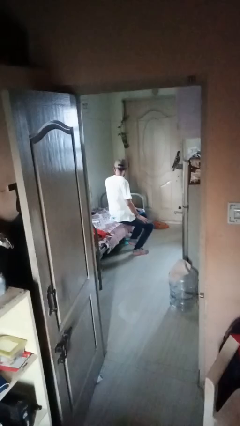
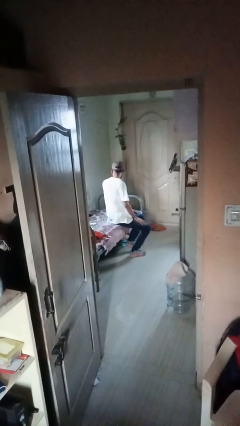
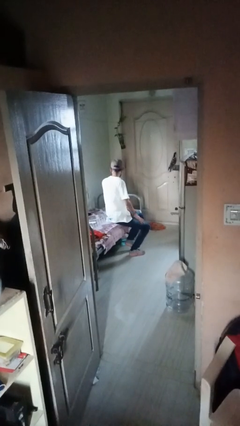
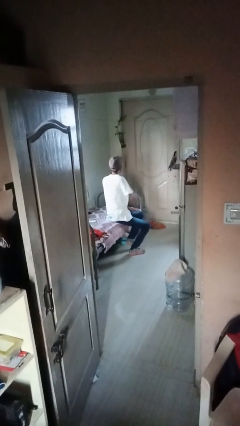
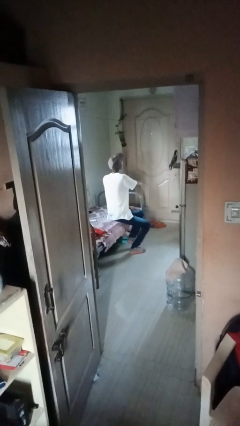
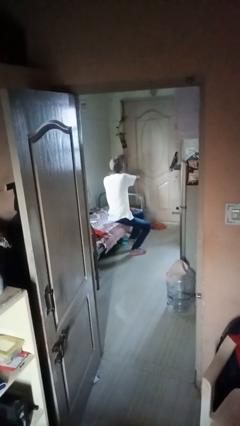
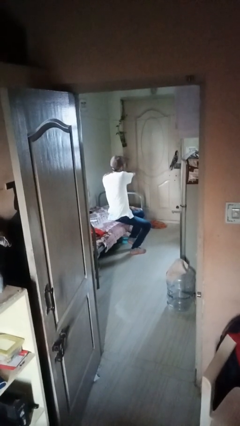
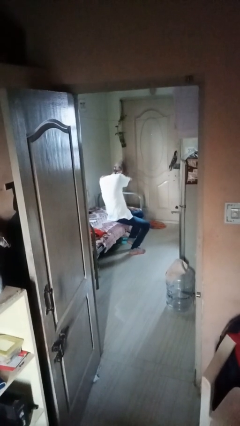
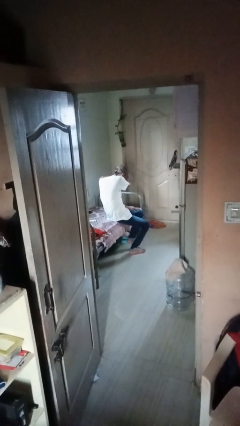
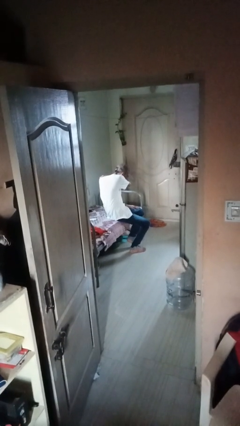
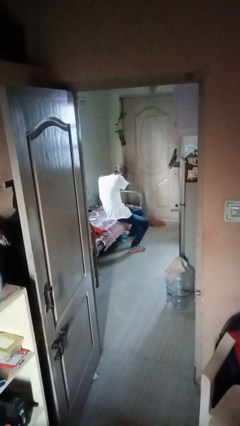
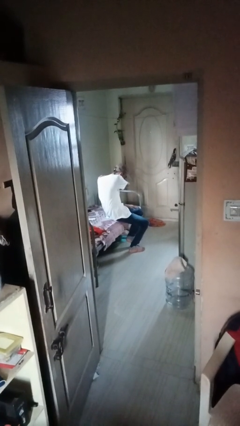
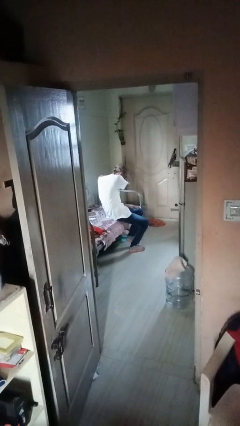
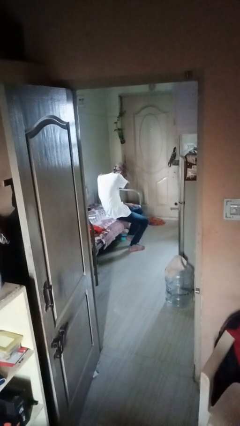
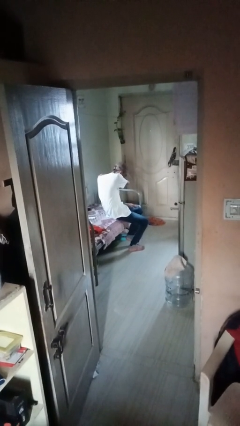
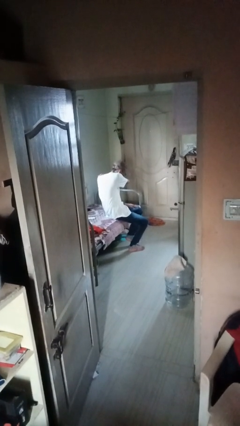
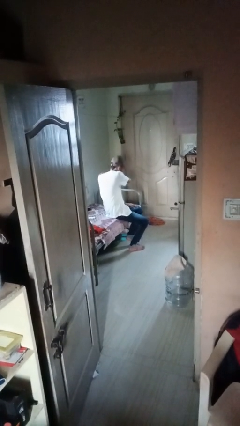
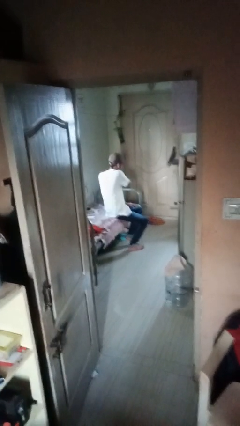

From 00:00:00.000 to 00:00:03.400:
person sneezes into arm

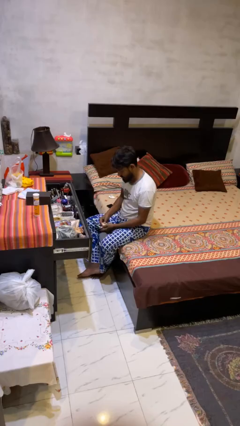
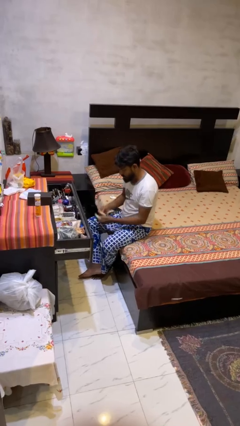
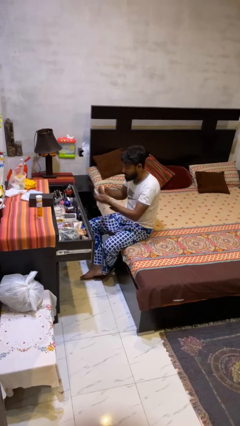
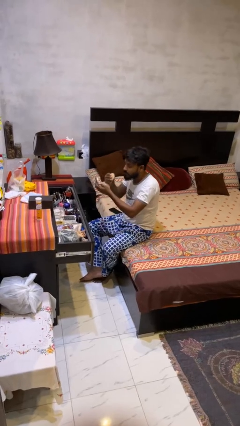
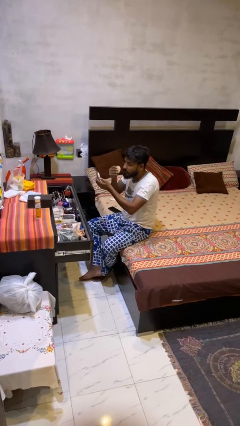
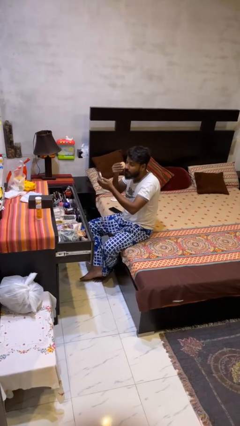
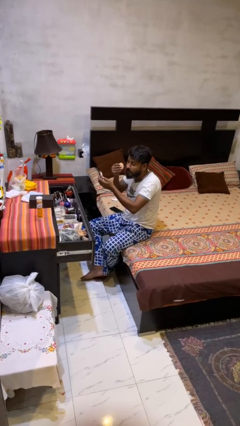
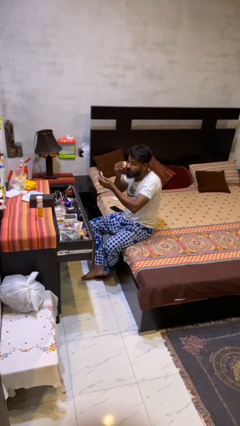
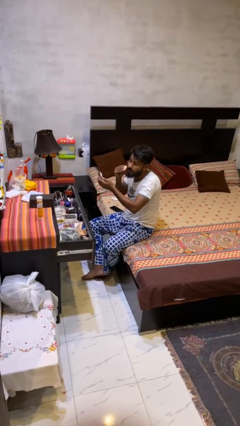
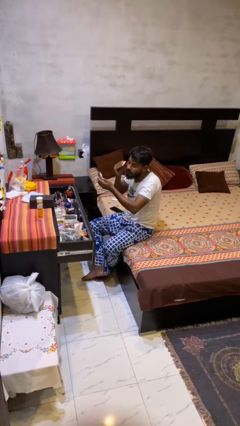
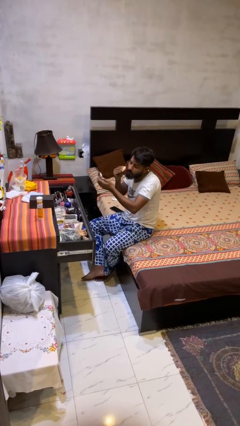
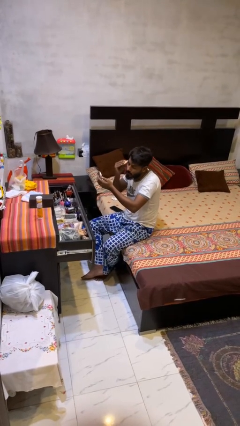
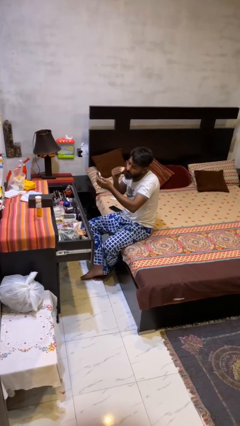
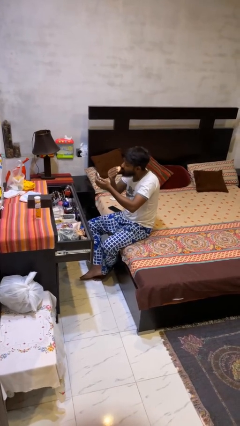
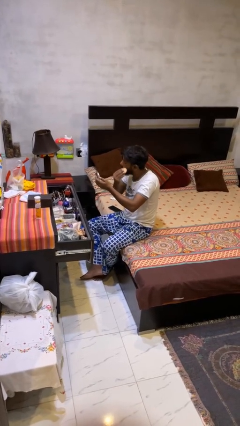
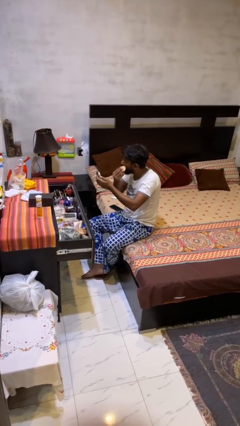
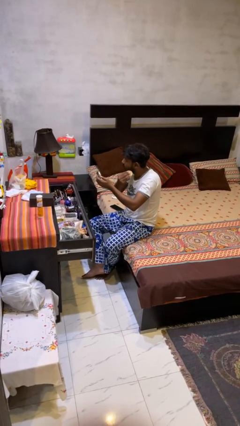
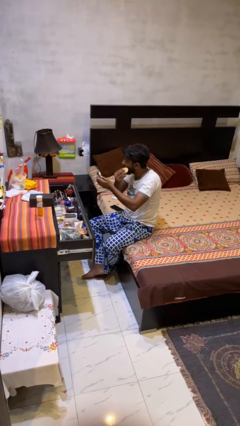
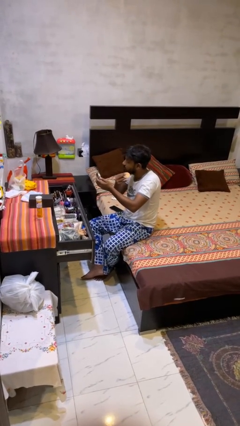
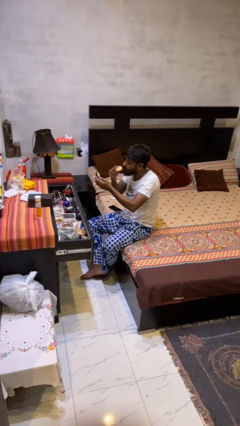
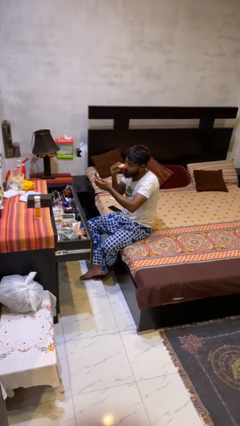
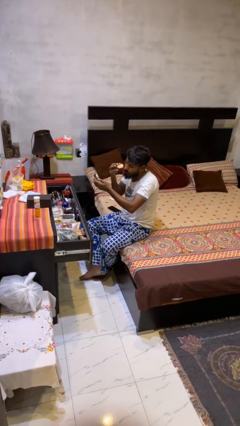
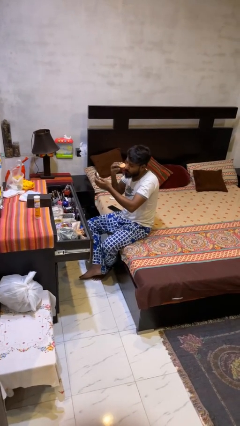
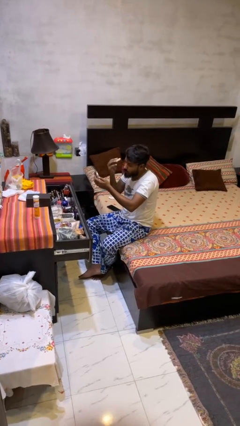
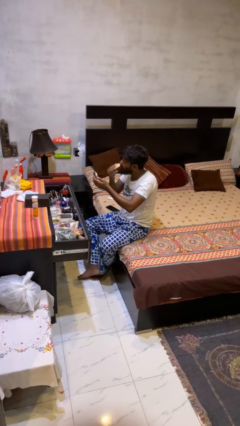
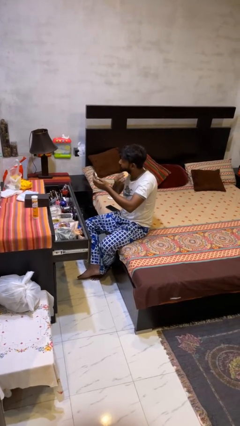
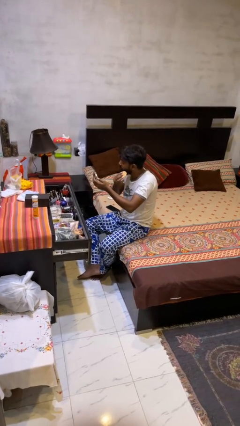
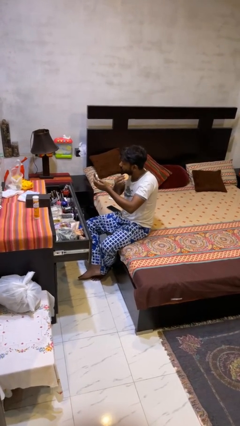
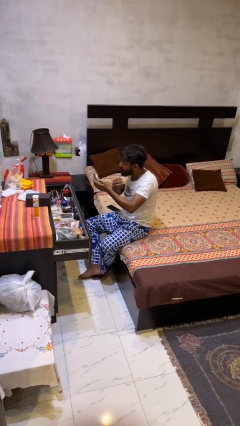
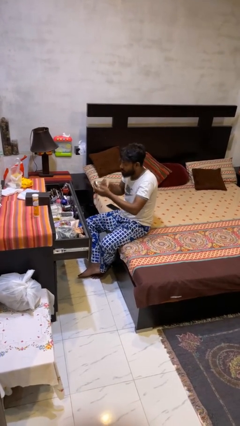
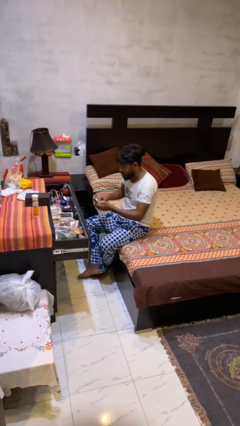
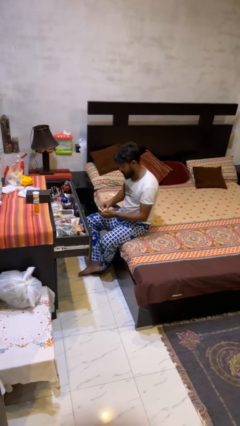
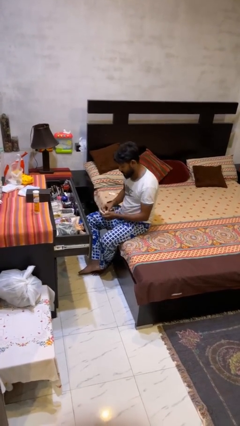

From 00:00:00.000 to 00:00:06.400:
person applies foundation makeup

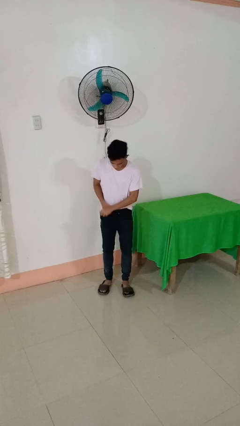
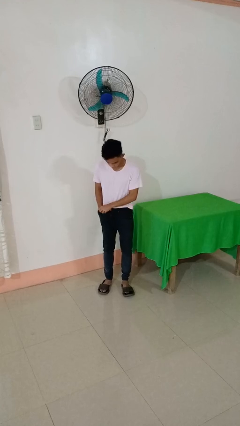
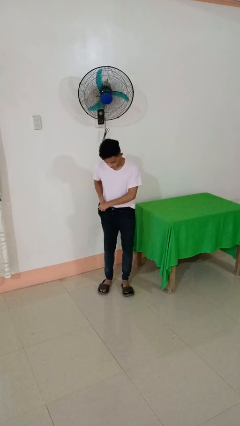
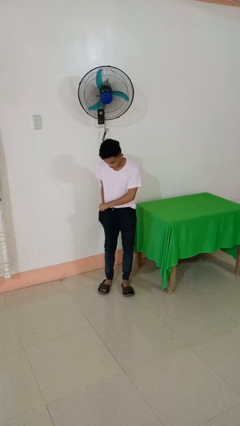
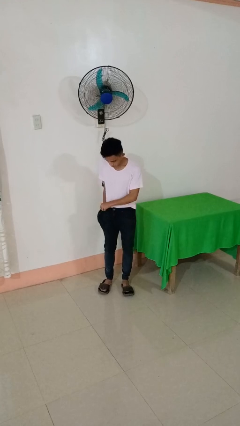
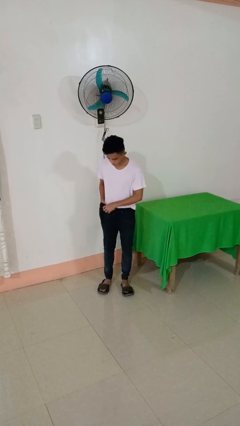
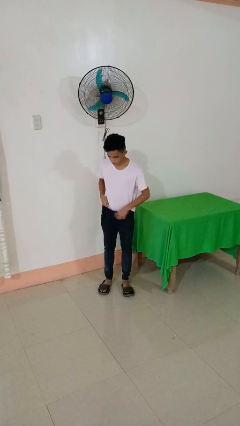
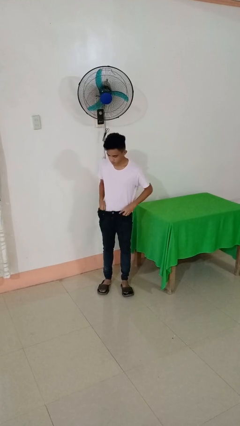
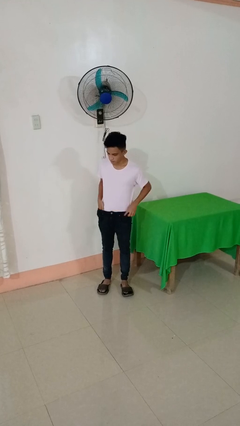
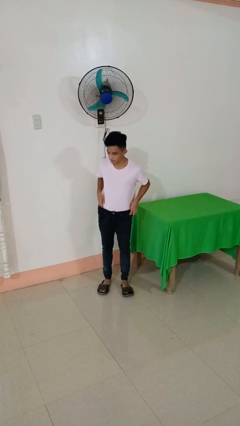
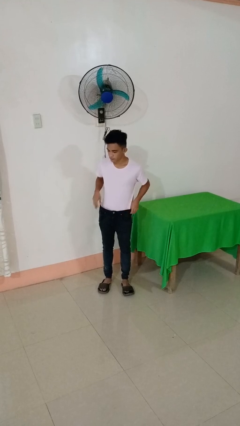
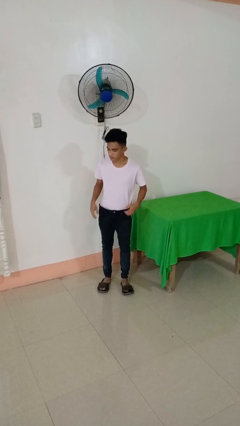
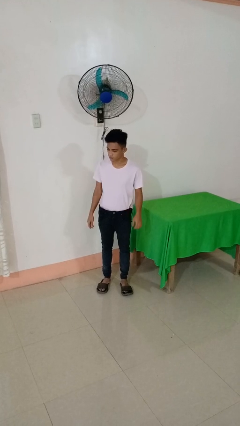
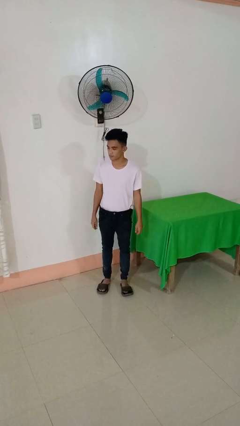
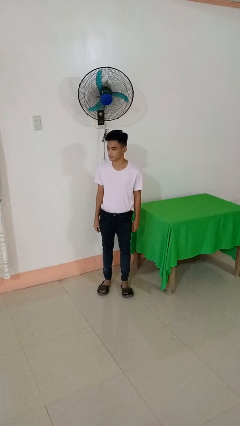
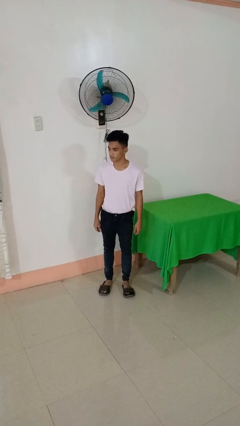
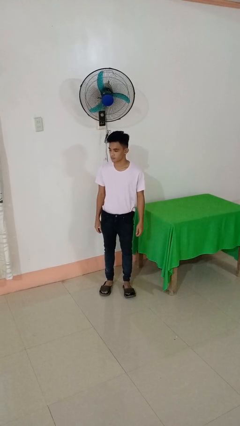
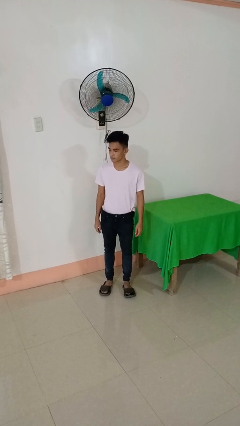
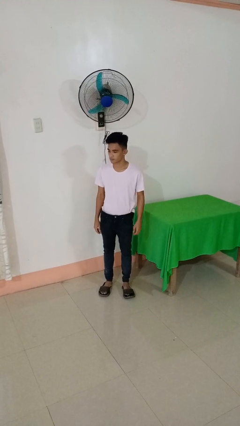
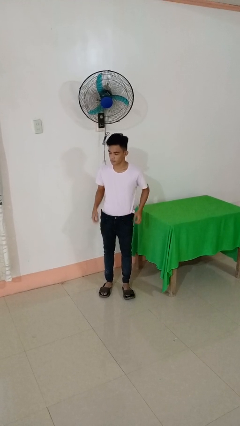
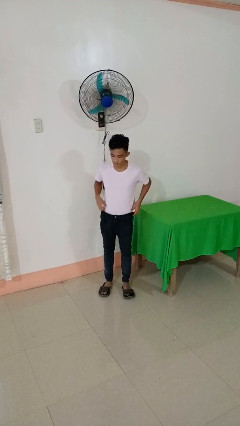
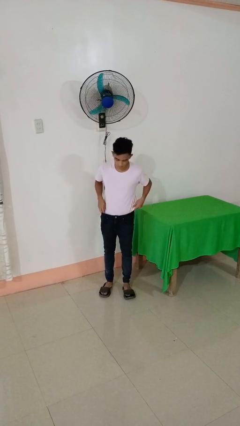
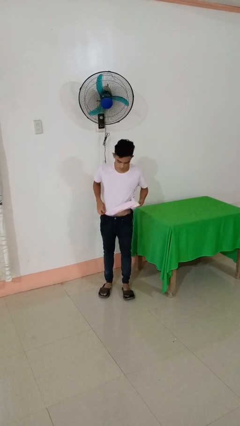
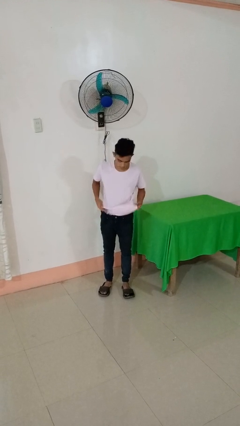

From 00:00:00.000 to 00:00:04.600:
person tucks in shirt

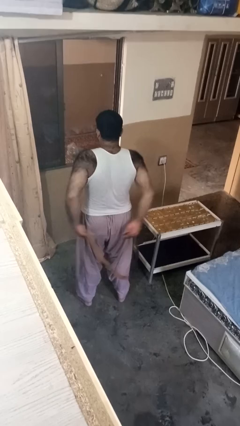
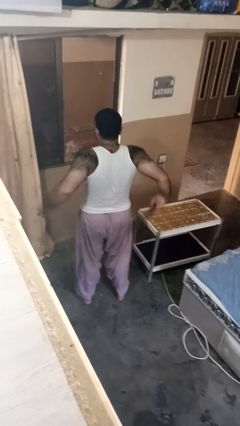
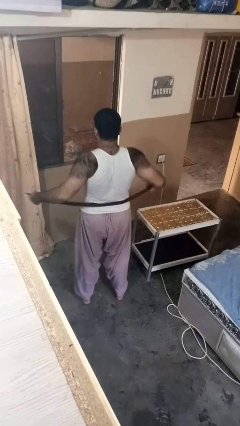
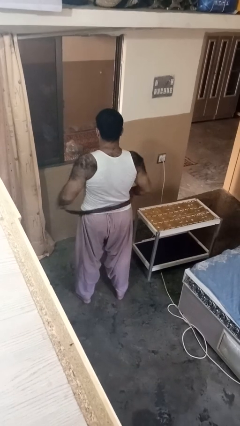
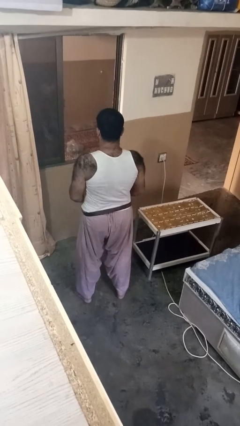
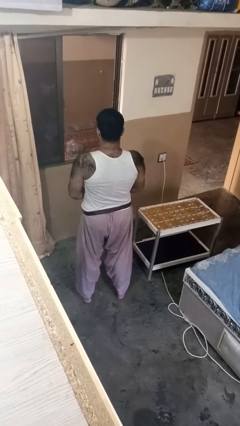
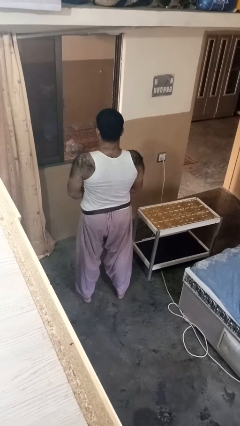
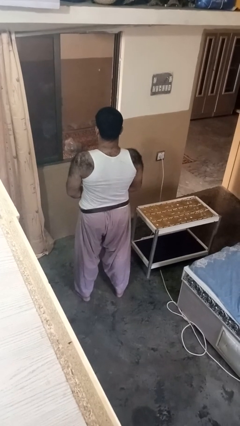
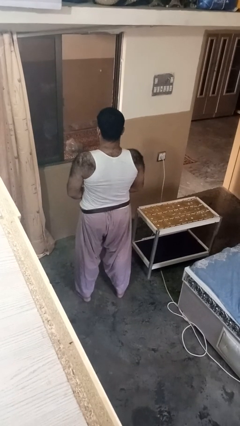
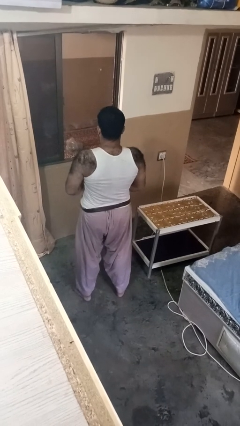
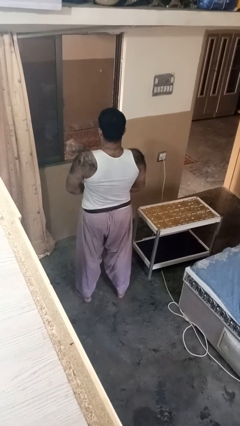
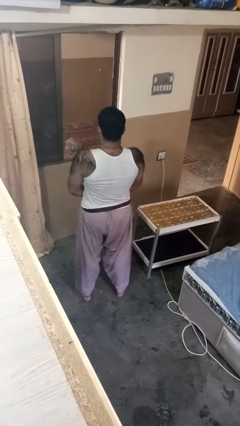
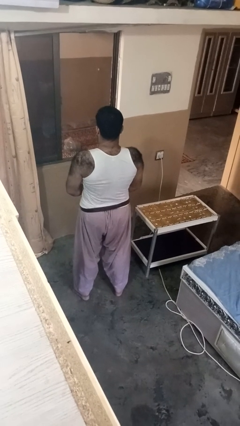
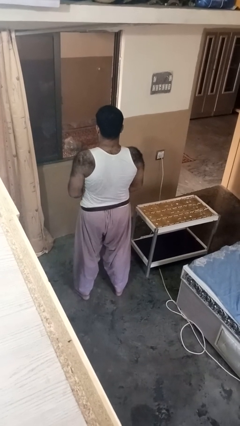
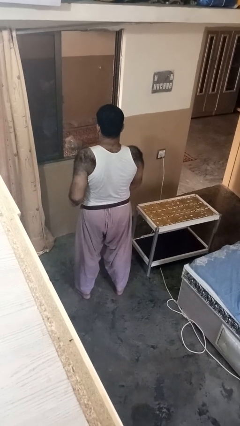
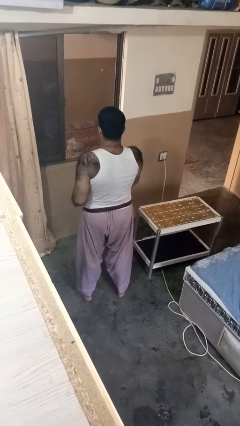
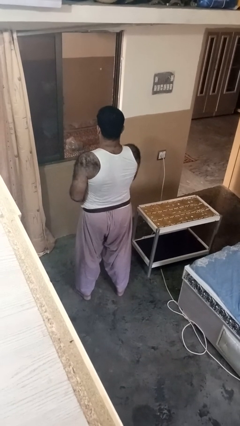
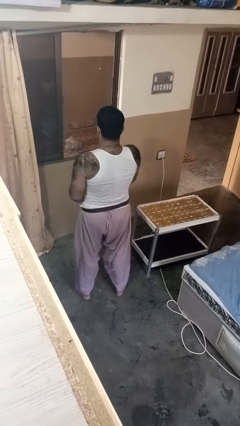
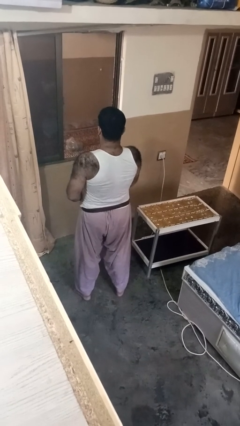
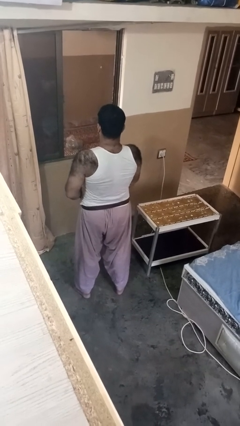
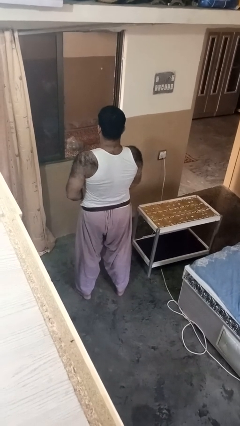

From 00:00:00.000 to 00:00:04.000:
person puts on belt
